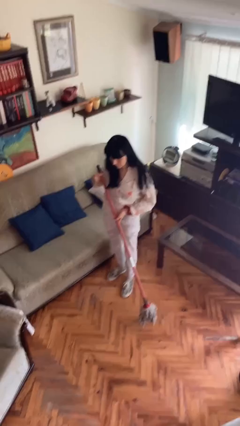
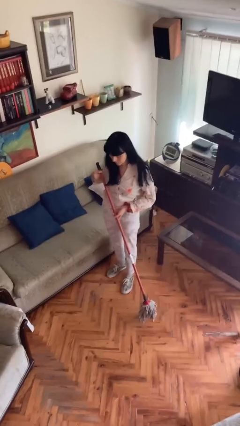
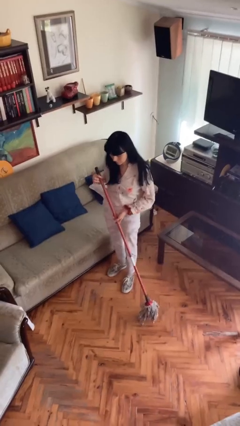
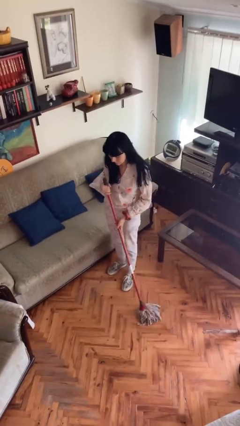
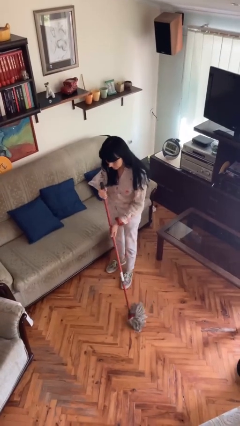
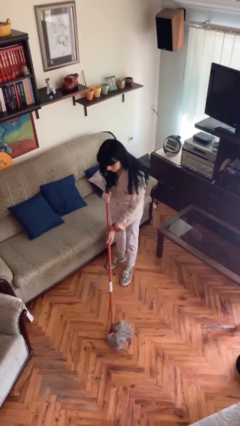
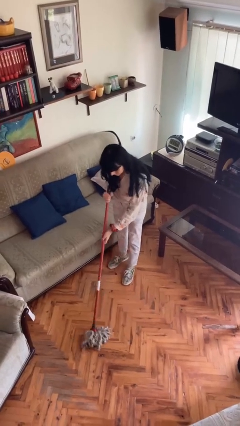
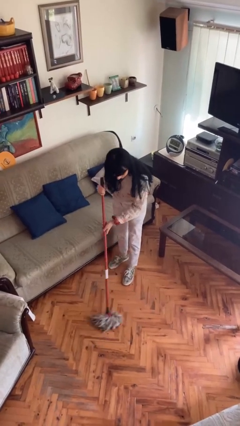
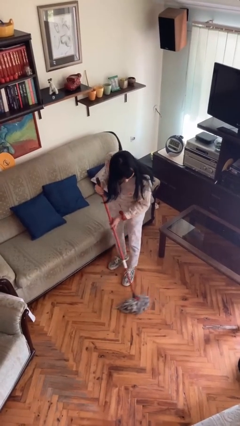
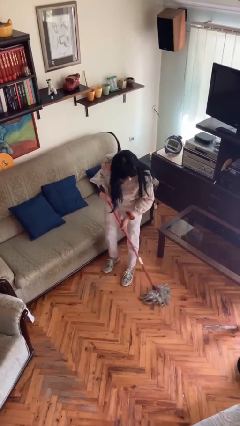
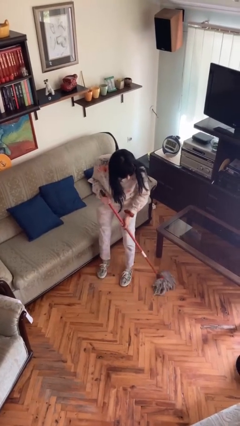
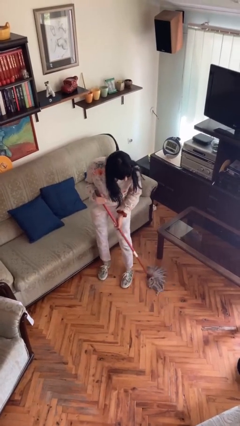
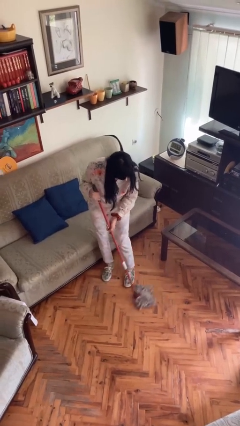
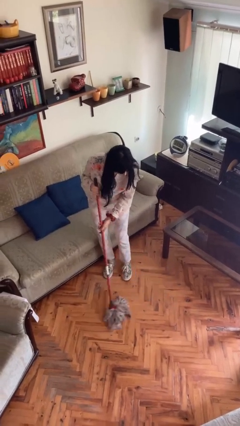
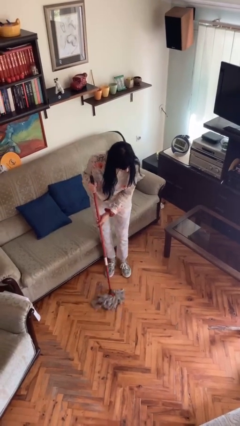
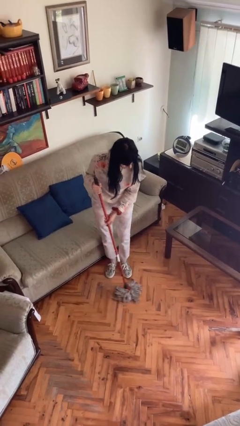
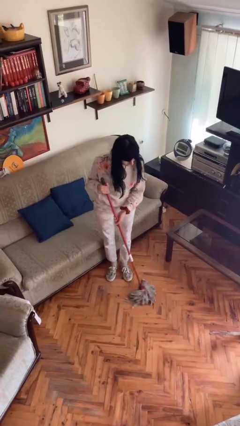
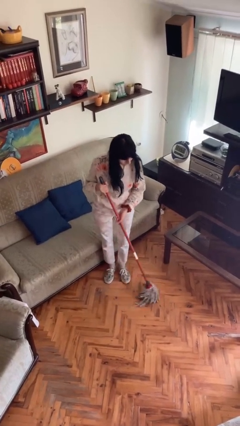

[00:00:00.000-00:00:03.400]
person sweeps floor

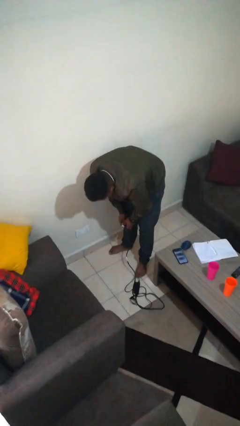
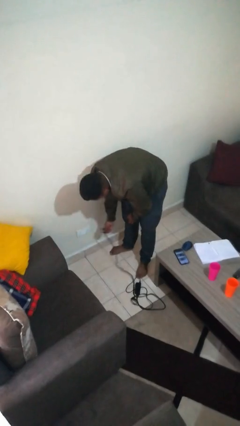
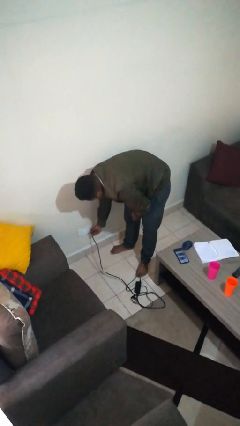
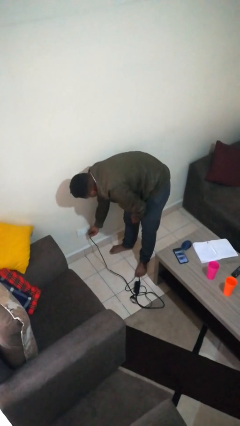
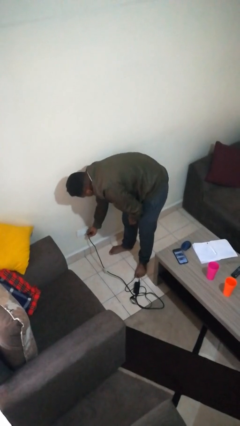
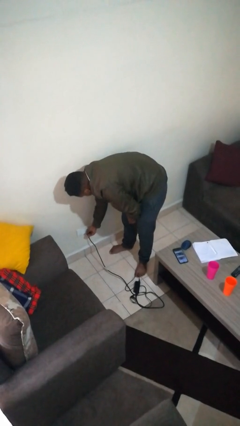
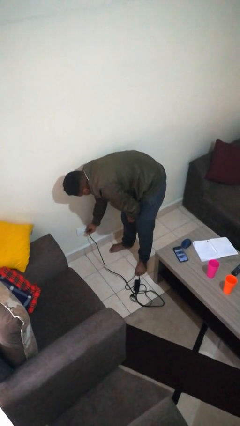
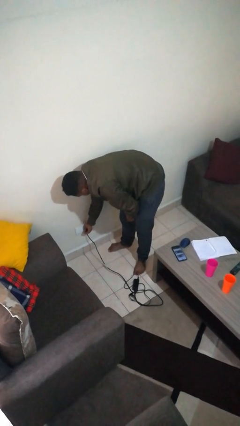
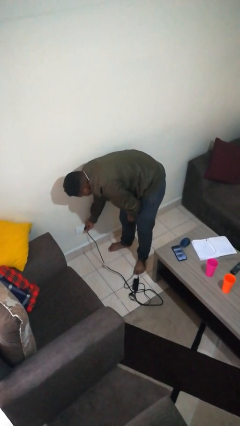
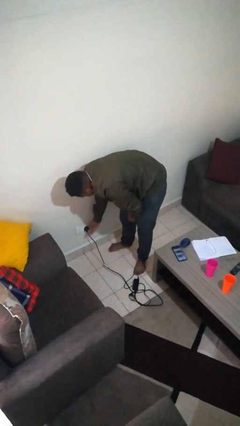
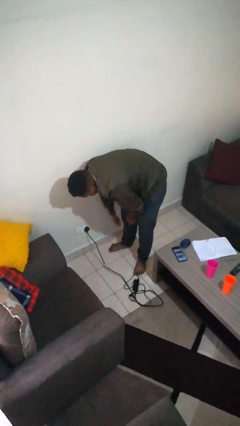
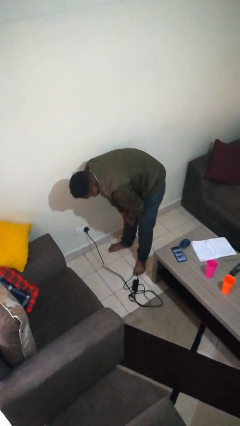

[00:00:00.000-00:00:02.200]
person plugs into electrical socket

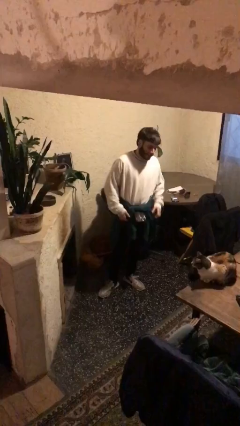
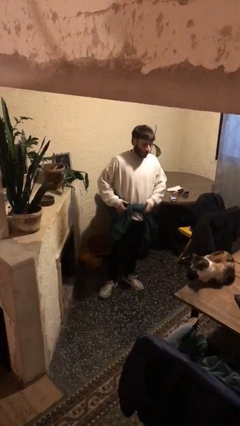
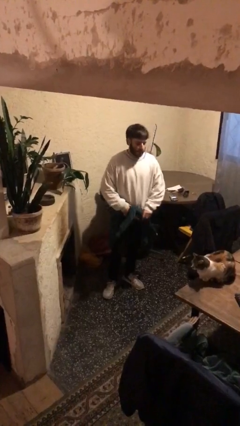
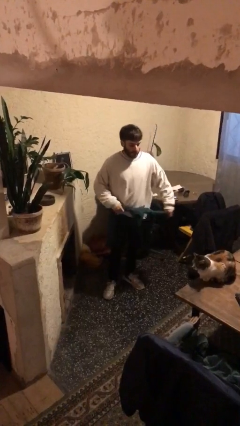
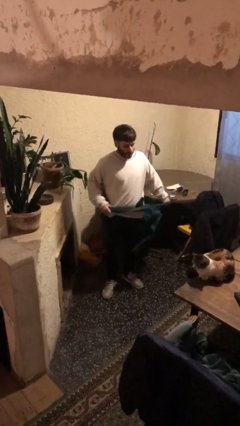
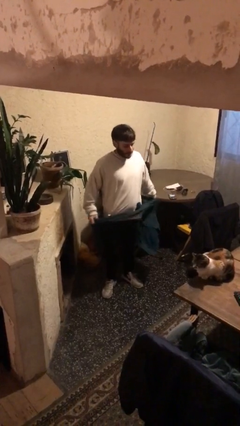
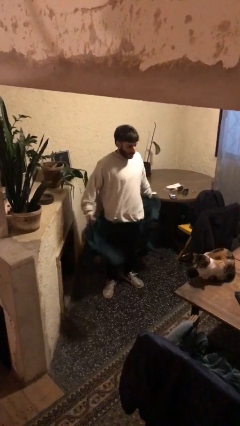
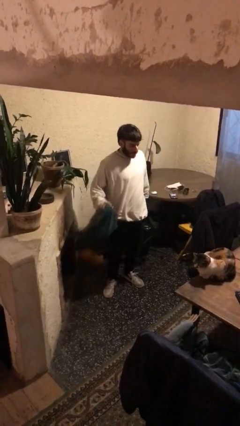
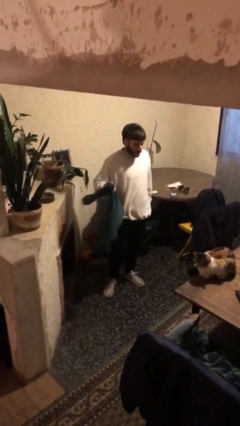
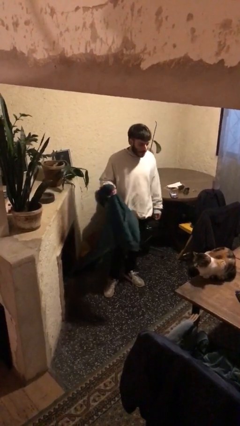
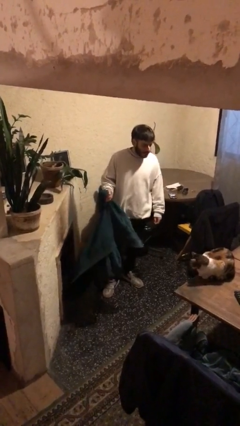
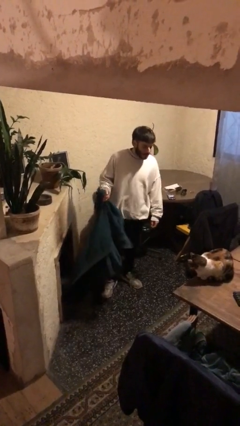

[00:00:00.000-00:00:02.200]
person unties jacket around waist

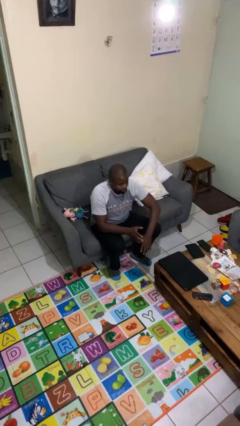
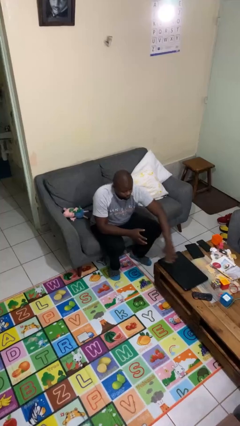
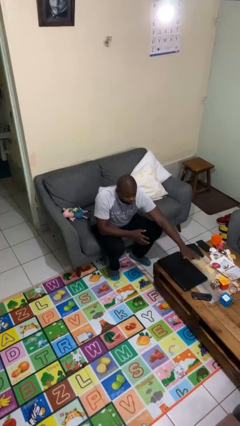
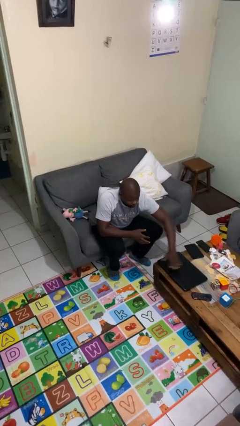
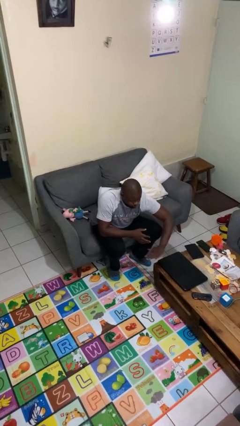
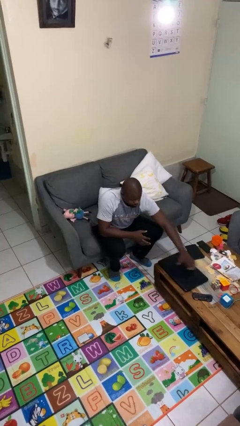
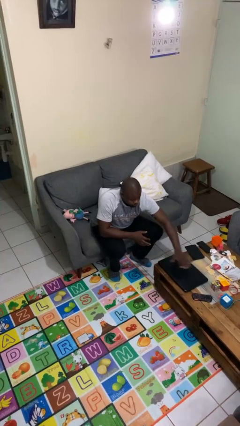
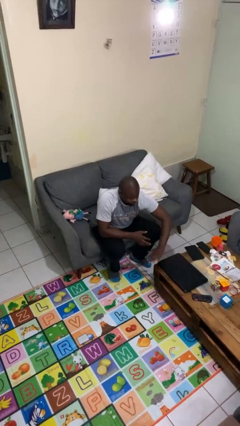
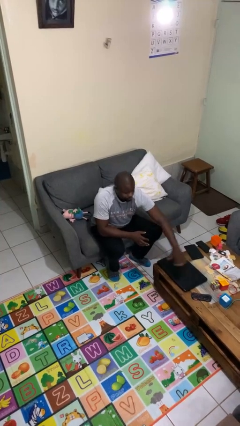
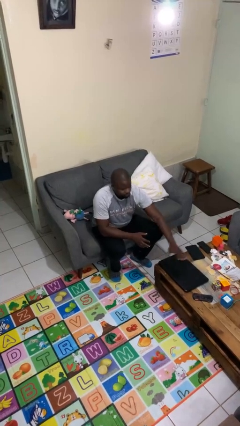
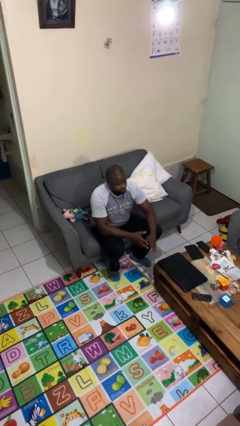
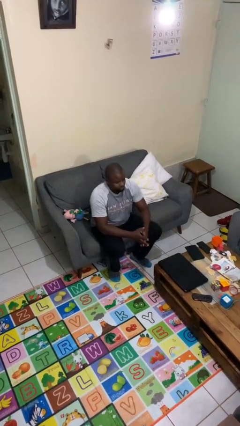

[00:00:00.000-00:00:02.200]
person waves hand over object

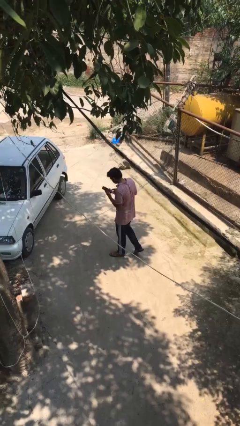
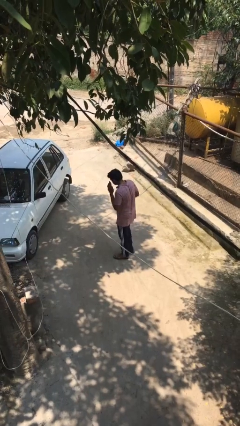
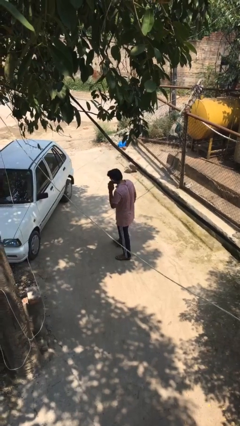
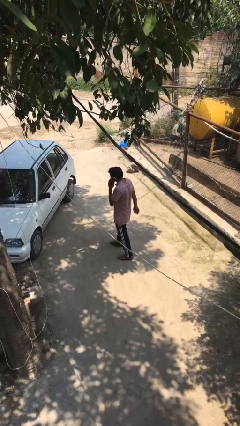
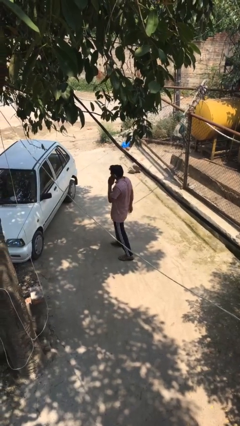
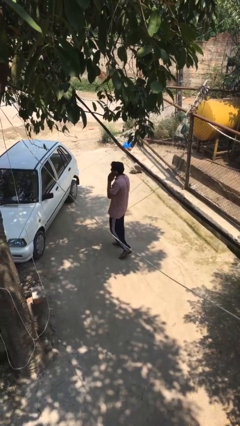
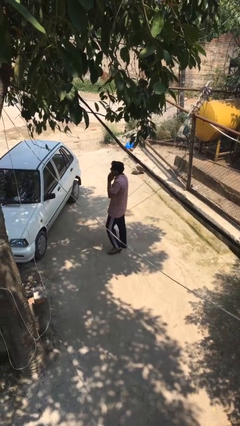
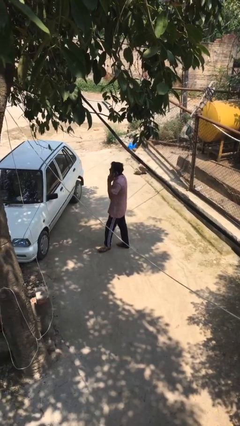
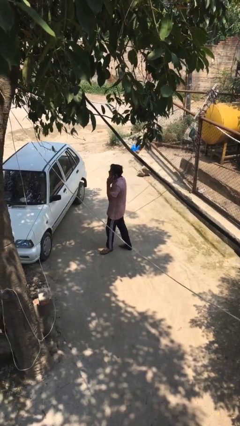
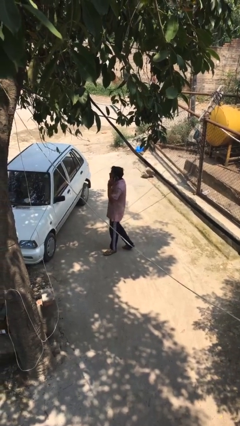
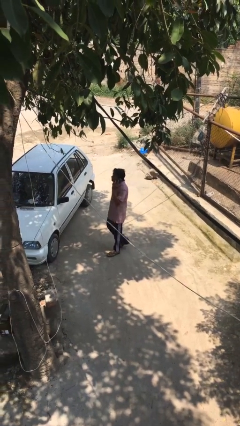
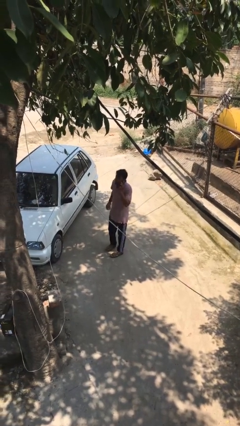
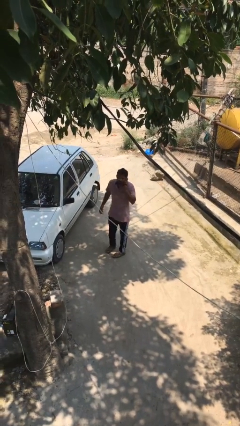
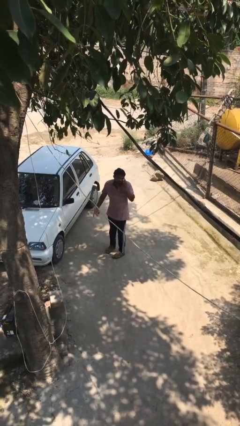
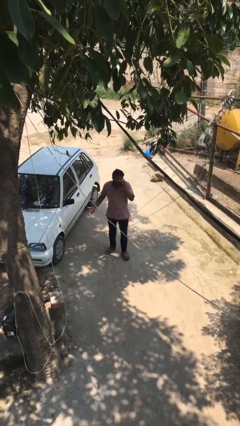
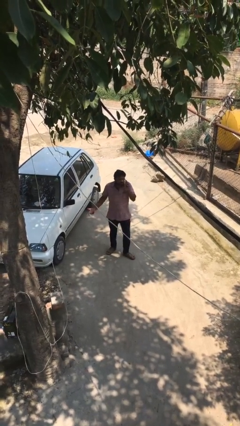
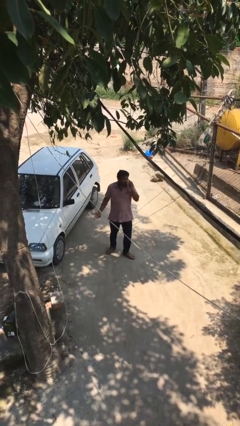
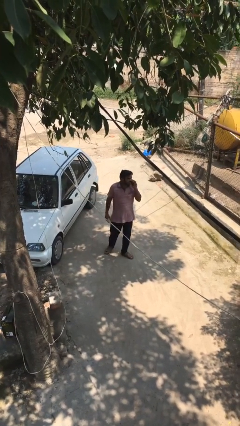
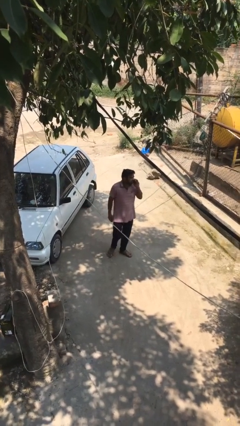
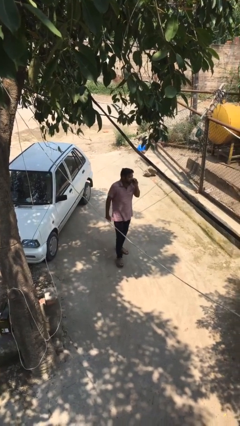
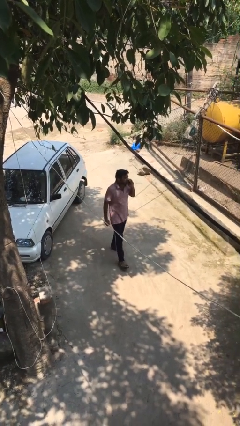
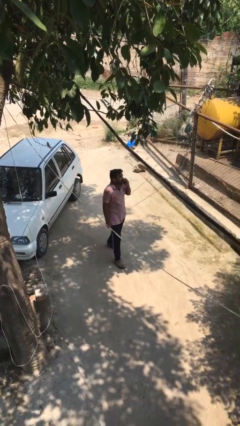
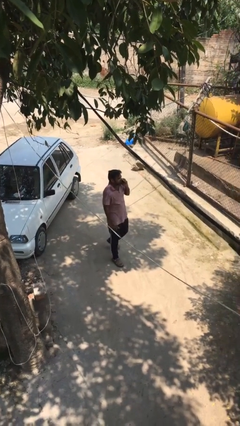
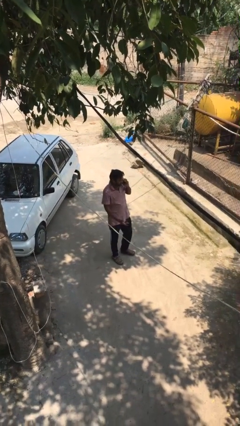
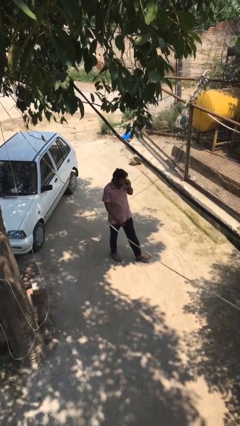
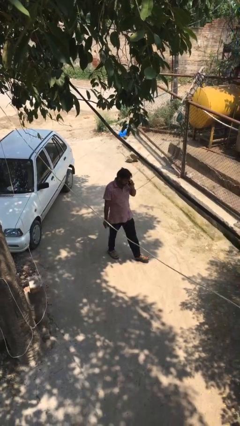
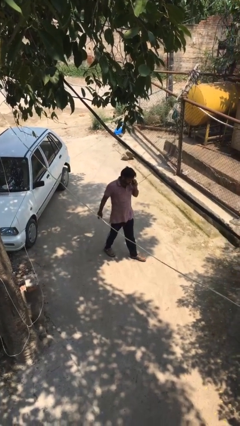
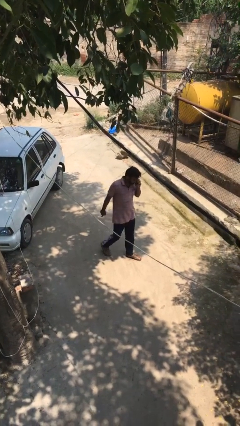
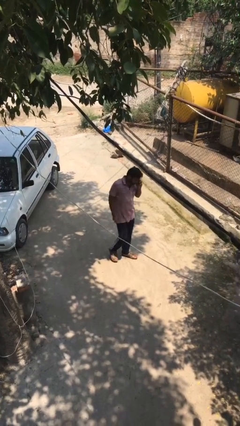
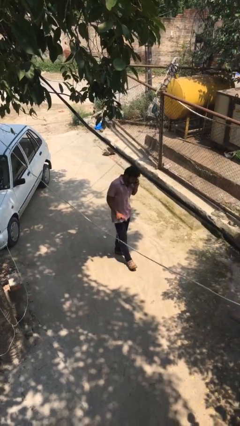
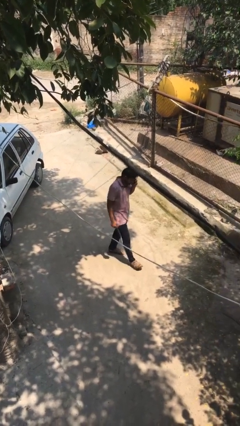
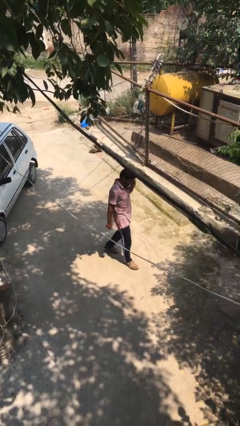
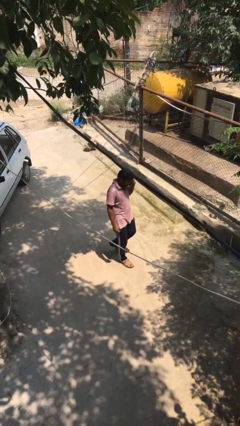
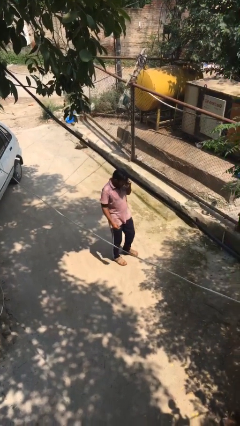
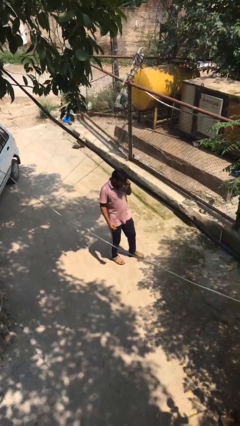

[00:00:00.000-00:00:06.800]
person talks on phone

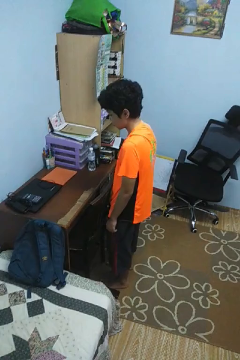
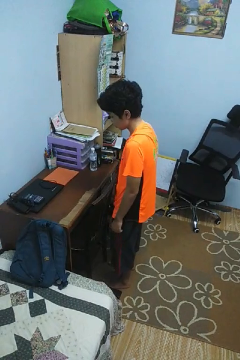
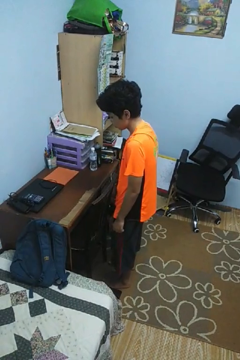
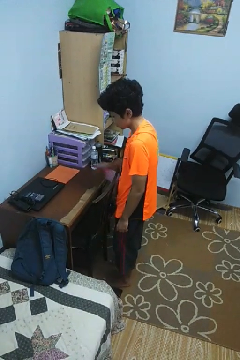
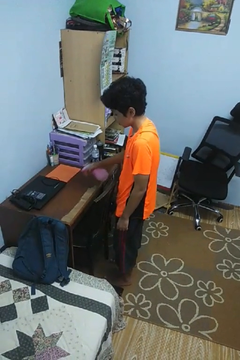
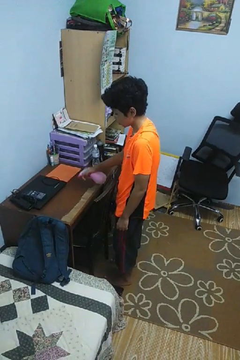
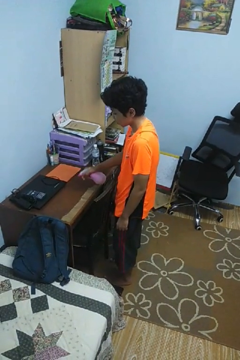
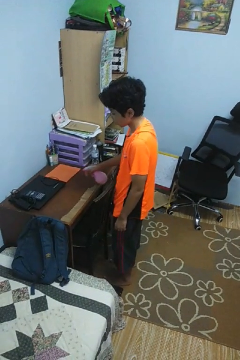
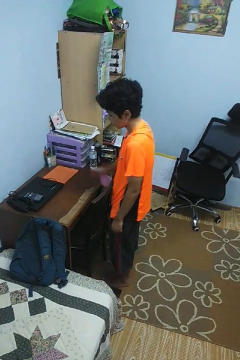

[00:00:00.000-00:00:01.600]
person sprays from bottle
